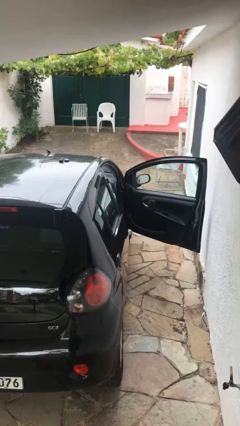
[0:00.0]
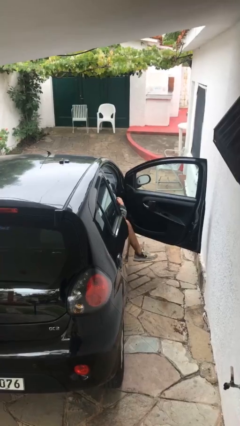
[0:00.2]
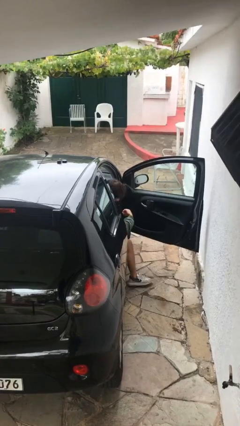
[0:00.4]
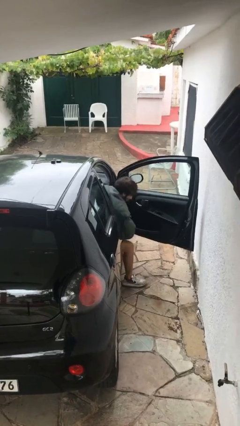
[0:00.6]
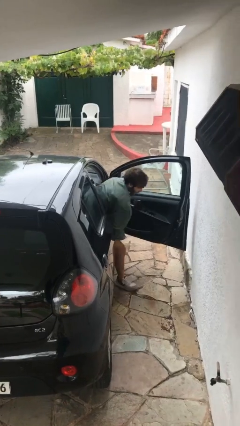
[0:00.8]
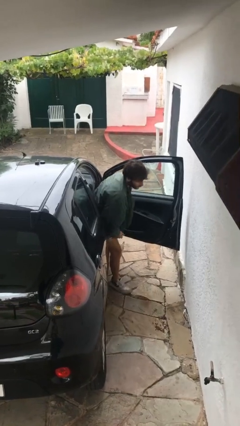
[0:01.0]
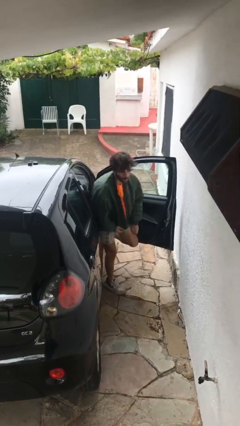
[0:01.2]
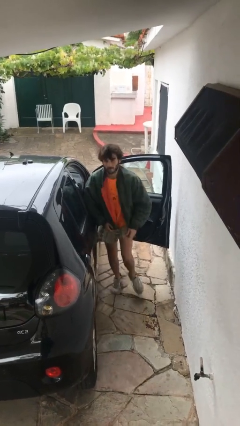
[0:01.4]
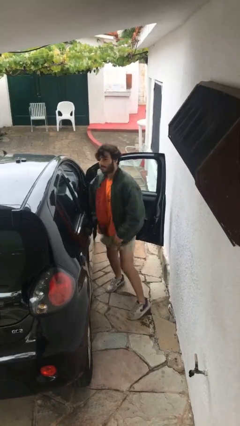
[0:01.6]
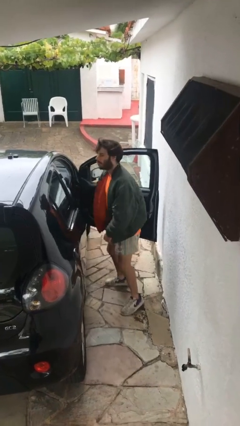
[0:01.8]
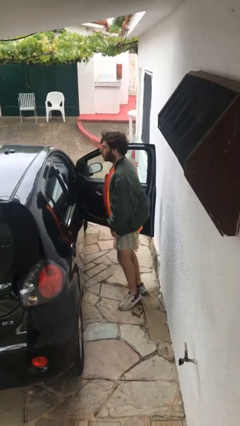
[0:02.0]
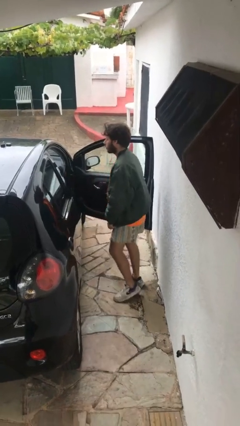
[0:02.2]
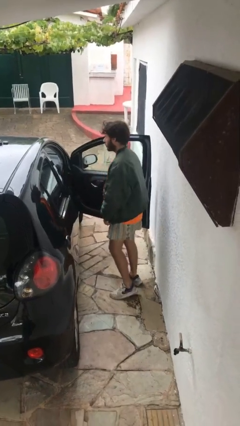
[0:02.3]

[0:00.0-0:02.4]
person exits car

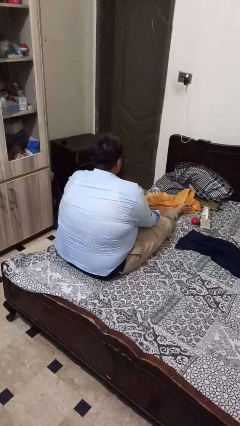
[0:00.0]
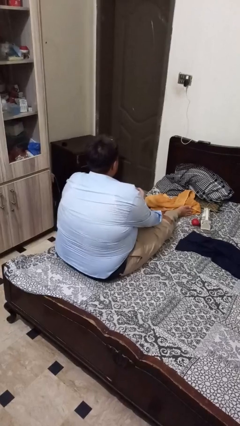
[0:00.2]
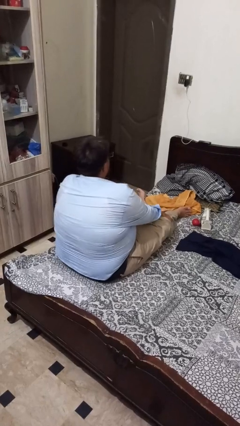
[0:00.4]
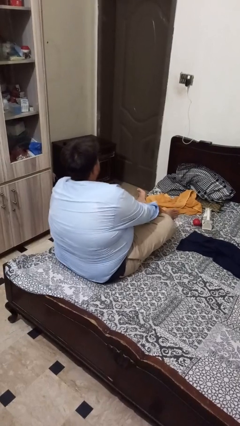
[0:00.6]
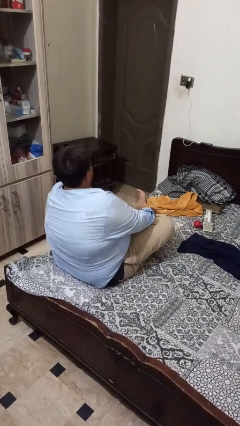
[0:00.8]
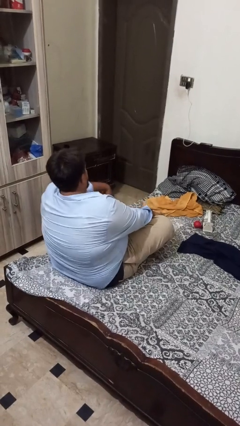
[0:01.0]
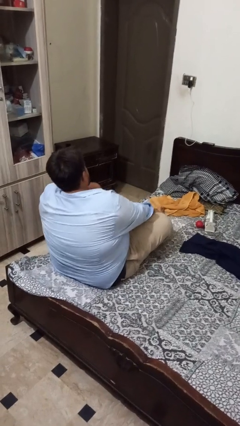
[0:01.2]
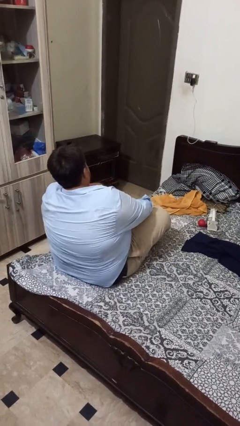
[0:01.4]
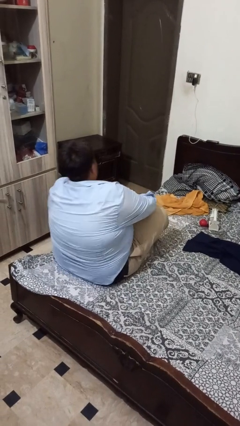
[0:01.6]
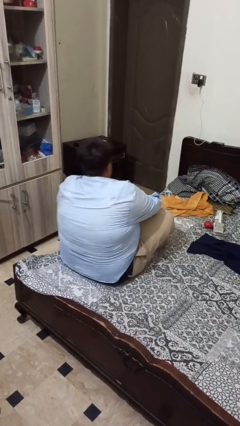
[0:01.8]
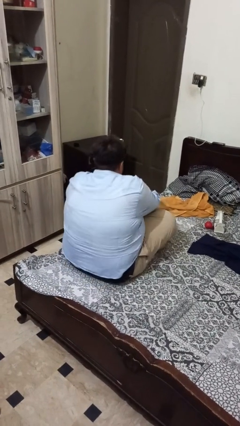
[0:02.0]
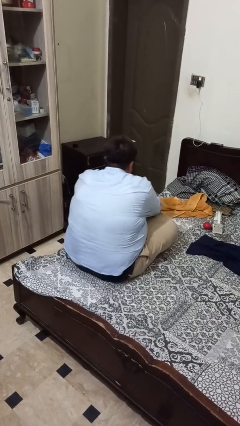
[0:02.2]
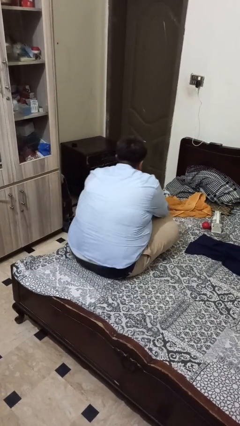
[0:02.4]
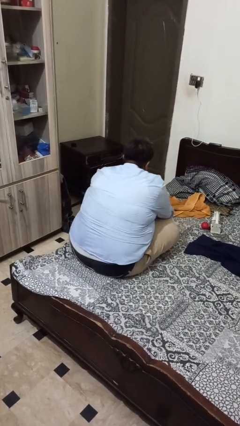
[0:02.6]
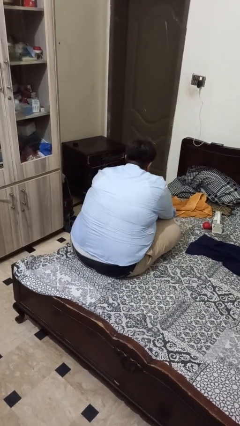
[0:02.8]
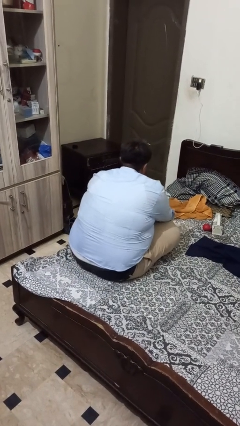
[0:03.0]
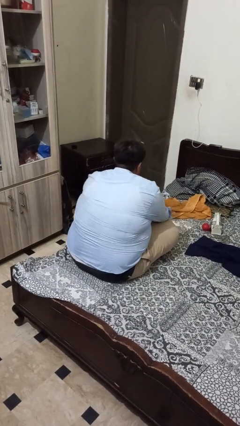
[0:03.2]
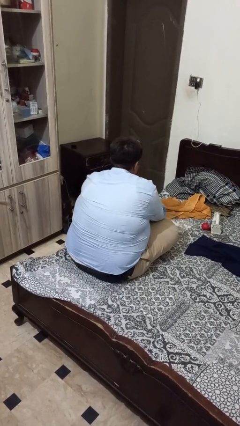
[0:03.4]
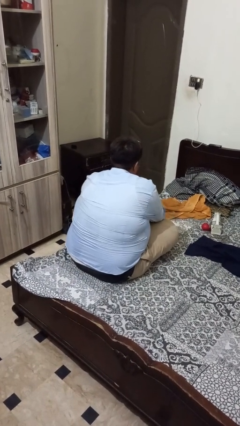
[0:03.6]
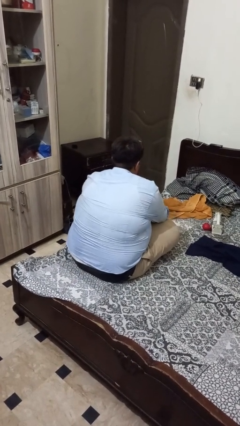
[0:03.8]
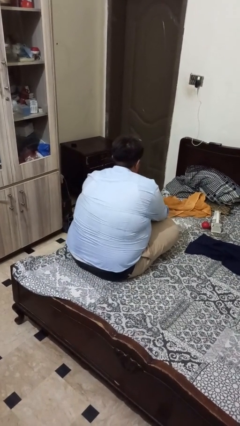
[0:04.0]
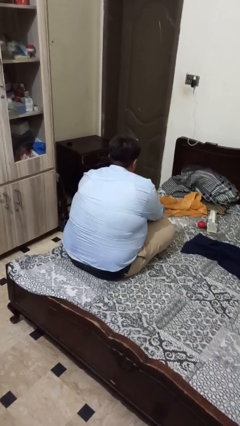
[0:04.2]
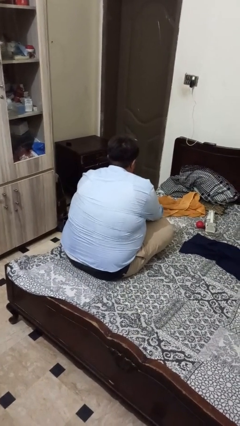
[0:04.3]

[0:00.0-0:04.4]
person crosses legs

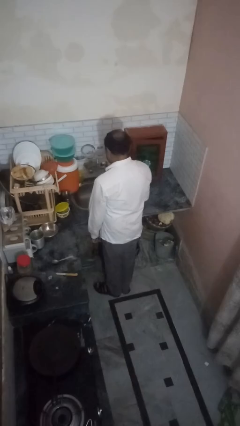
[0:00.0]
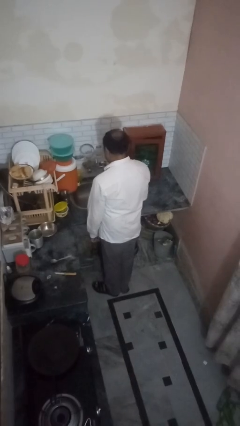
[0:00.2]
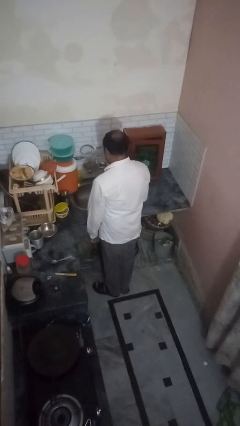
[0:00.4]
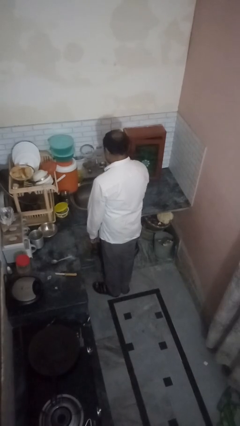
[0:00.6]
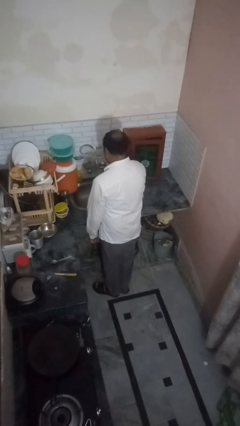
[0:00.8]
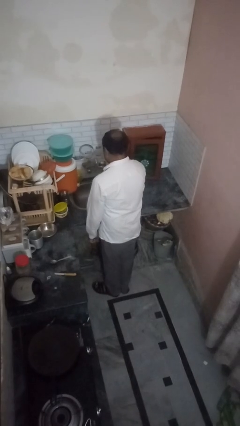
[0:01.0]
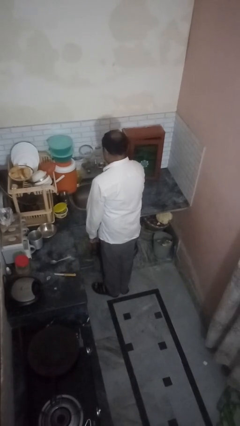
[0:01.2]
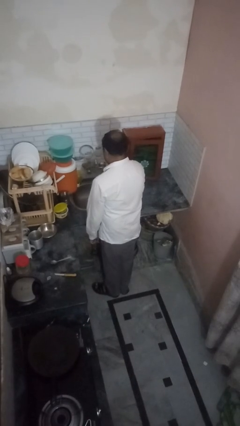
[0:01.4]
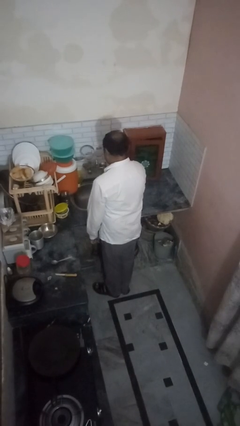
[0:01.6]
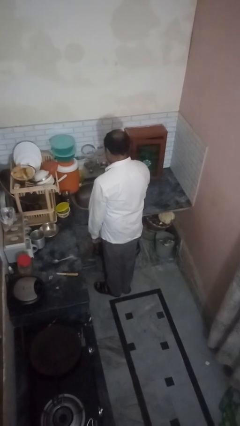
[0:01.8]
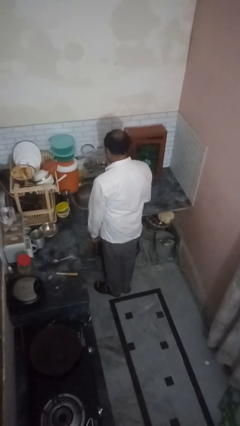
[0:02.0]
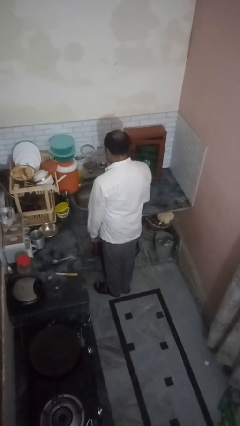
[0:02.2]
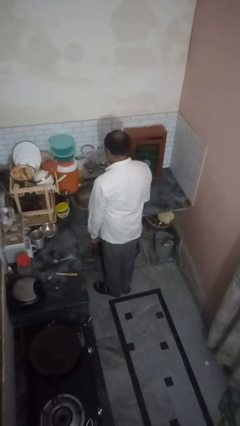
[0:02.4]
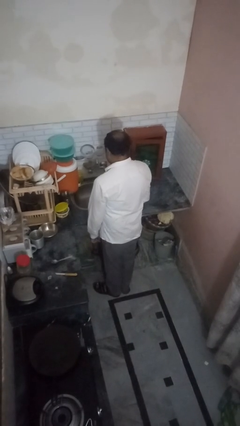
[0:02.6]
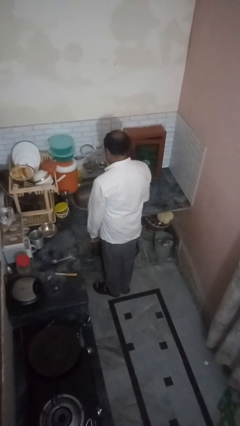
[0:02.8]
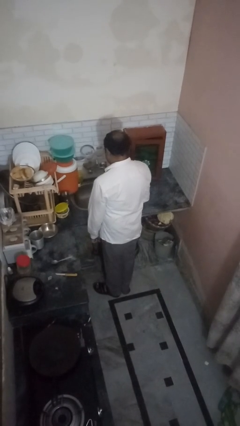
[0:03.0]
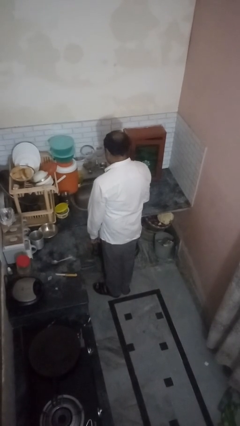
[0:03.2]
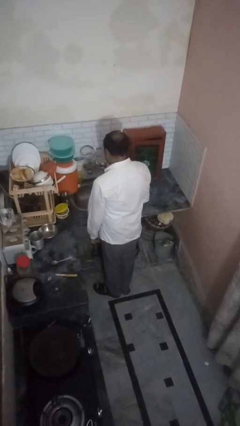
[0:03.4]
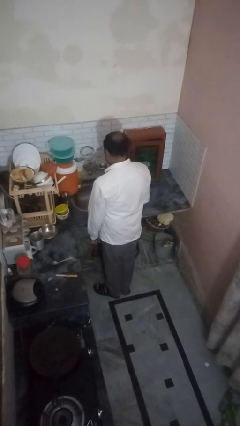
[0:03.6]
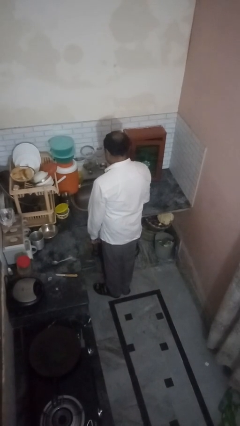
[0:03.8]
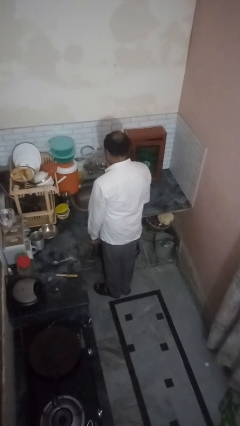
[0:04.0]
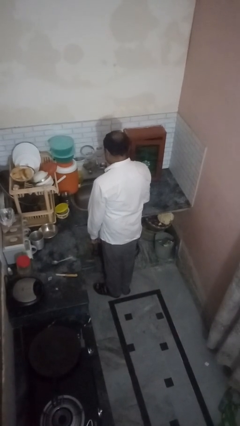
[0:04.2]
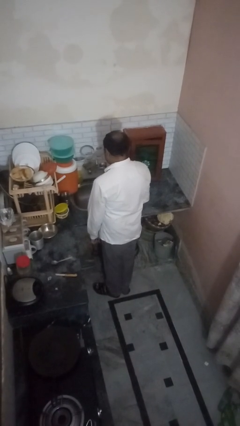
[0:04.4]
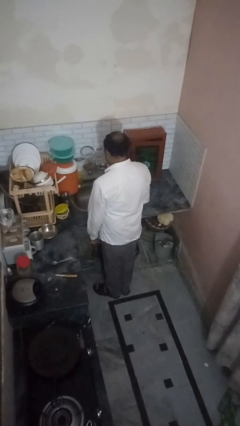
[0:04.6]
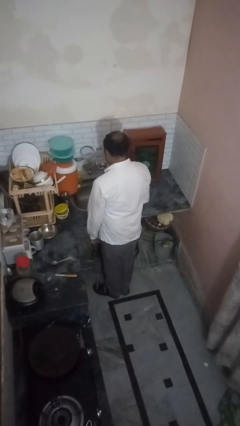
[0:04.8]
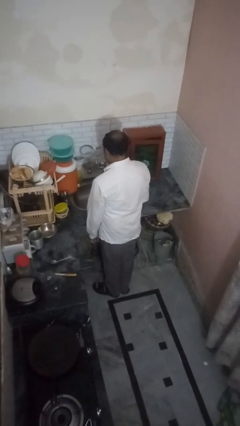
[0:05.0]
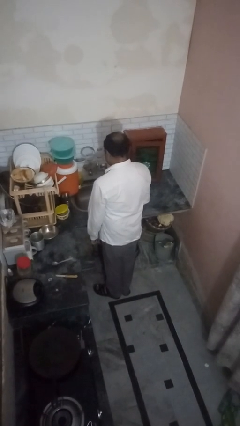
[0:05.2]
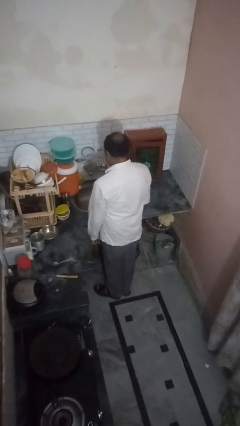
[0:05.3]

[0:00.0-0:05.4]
person turns off faucet

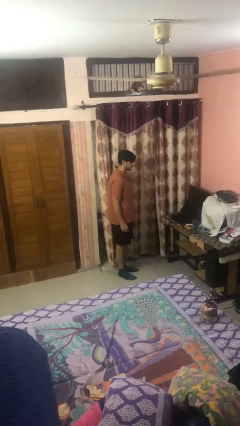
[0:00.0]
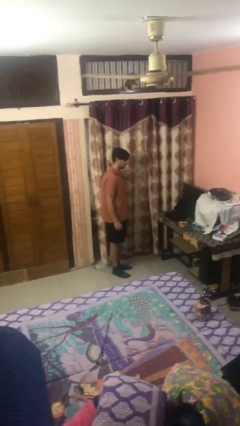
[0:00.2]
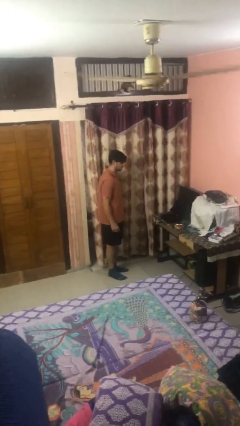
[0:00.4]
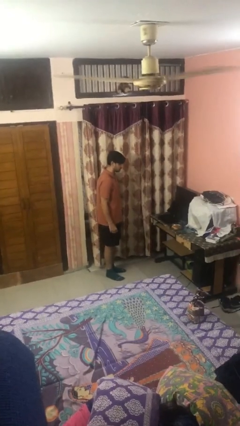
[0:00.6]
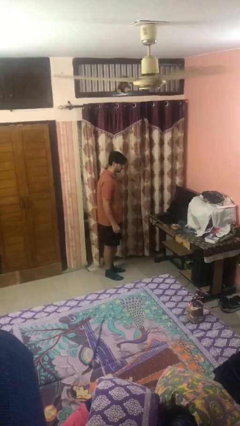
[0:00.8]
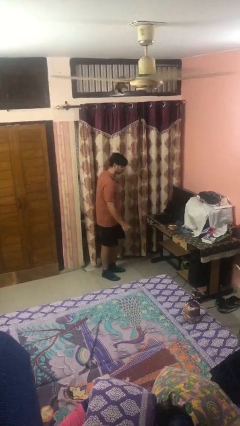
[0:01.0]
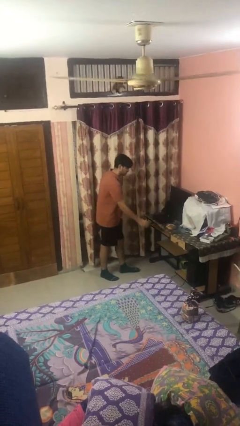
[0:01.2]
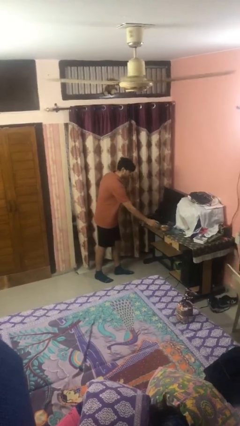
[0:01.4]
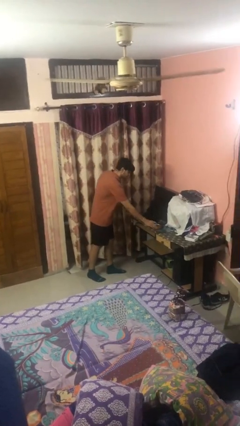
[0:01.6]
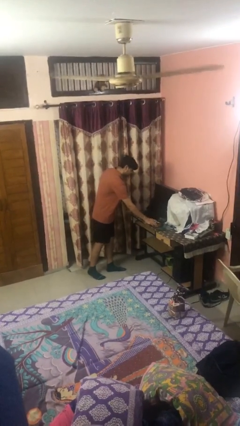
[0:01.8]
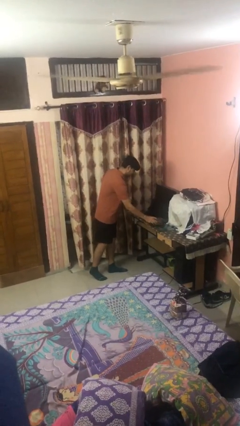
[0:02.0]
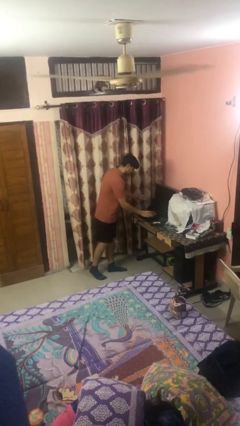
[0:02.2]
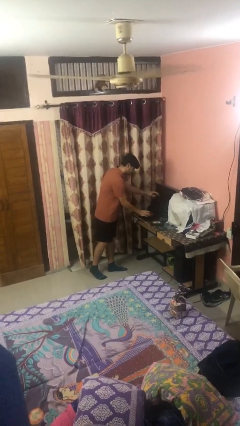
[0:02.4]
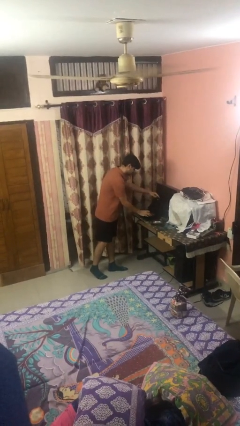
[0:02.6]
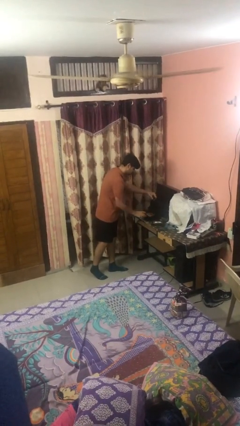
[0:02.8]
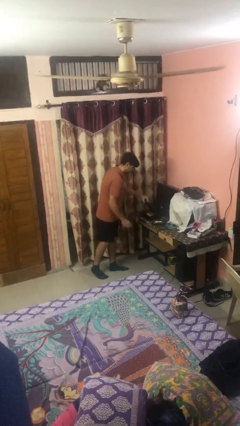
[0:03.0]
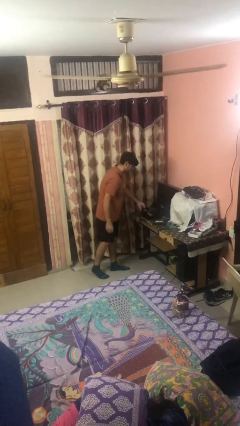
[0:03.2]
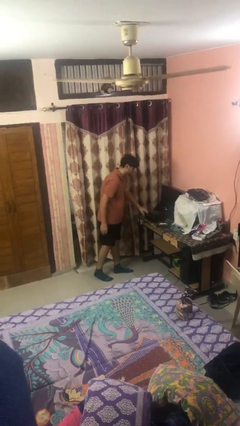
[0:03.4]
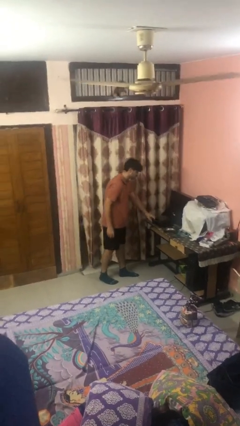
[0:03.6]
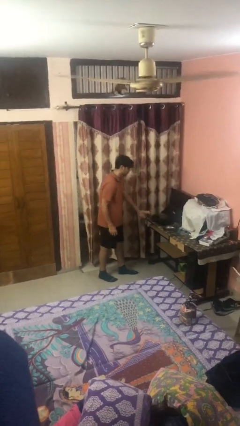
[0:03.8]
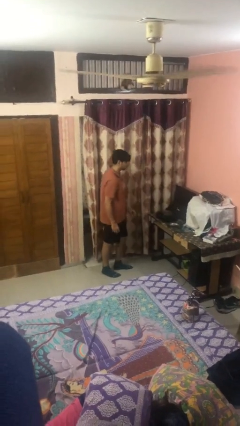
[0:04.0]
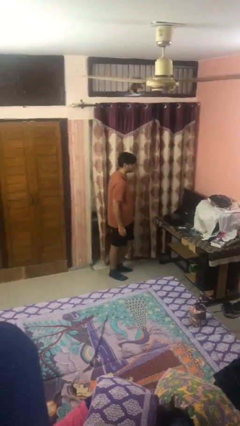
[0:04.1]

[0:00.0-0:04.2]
person puts object into toaster

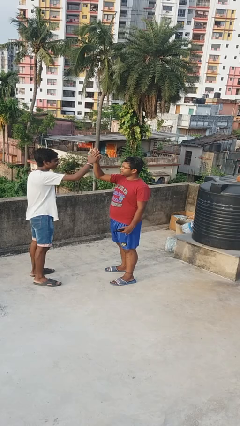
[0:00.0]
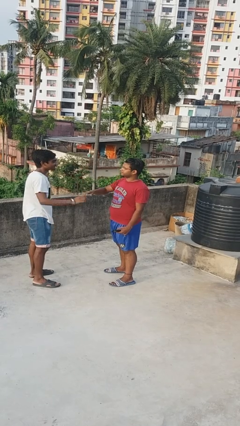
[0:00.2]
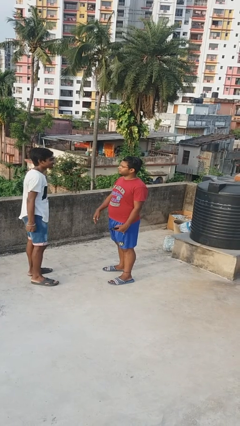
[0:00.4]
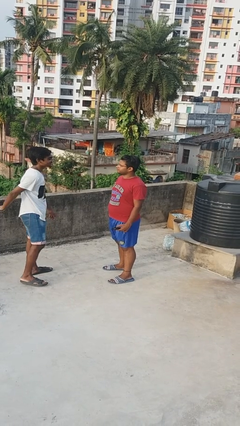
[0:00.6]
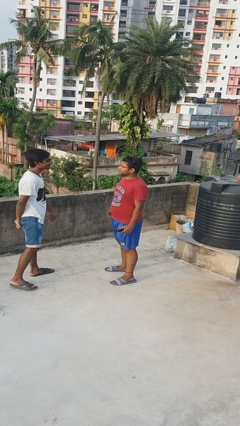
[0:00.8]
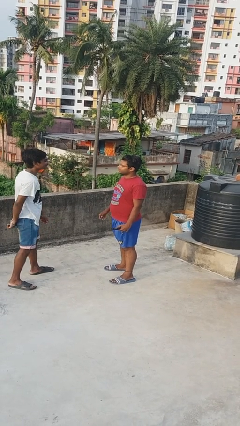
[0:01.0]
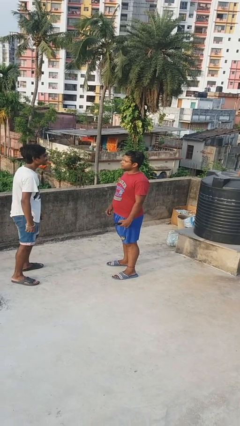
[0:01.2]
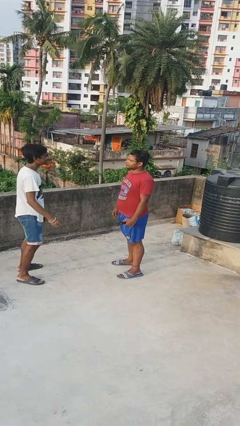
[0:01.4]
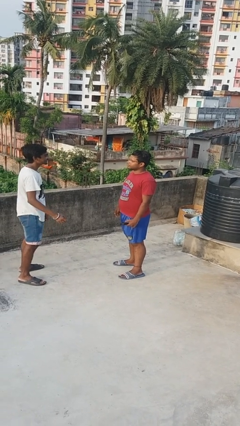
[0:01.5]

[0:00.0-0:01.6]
person highfives hand
